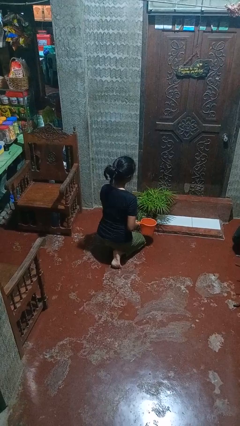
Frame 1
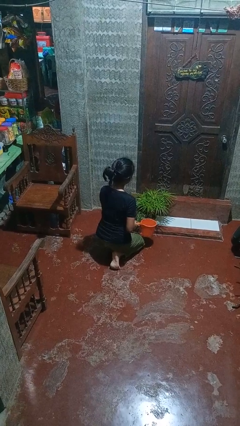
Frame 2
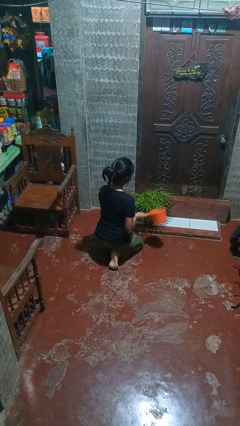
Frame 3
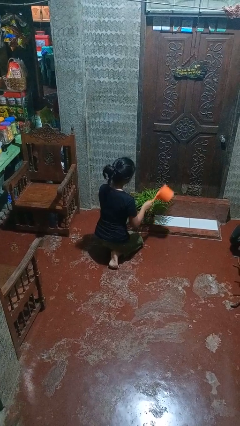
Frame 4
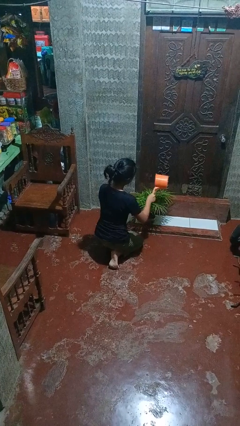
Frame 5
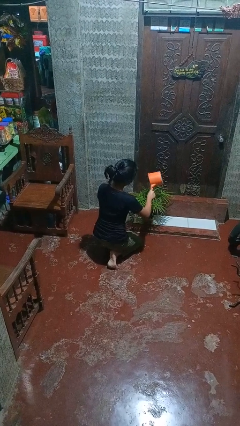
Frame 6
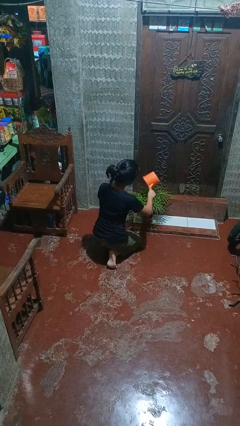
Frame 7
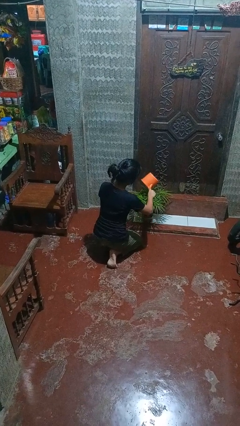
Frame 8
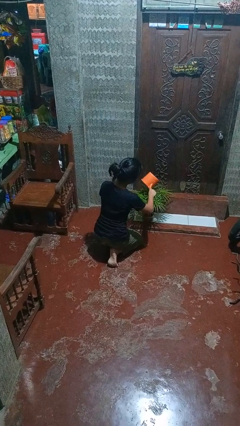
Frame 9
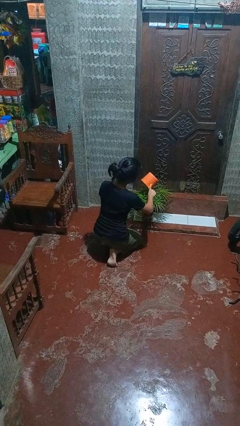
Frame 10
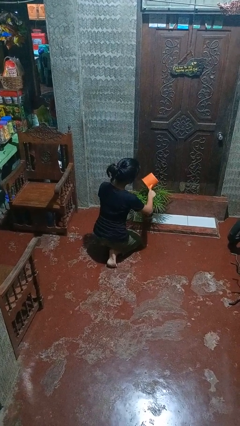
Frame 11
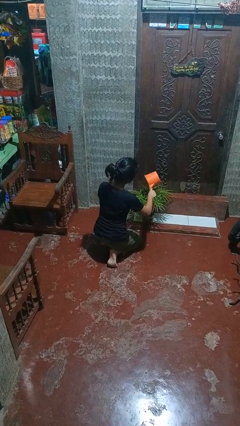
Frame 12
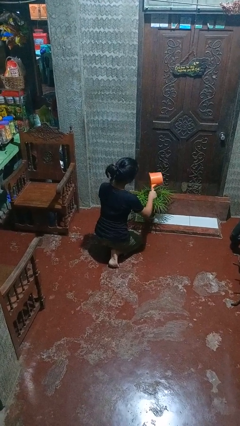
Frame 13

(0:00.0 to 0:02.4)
person waters houseplant

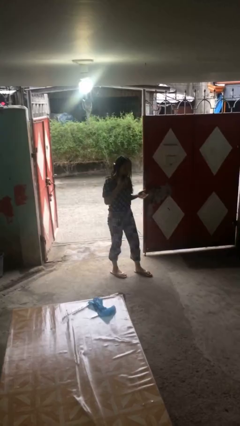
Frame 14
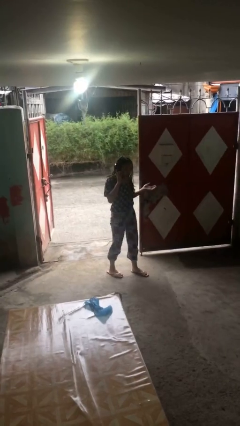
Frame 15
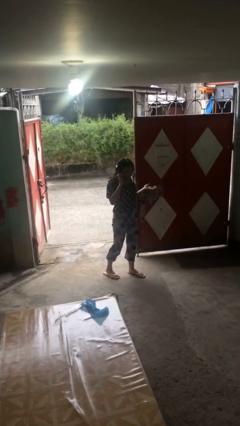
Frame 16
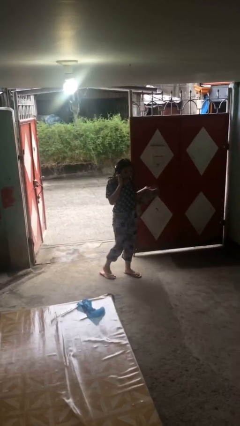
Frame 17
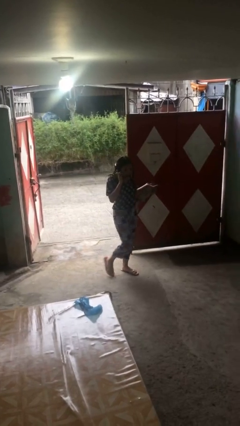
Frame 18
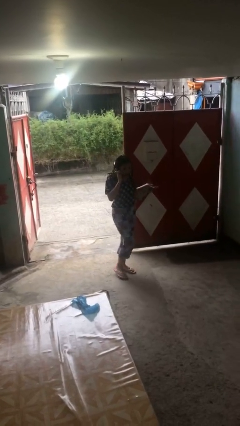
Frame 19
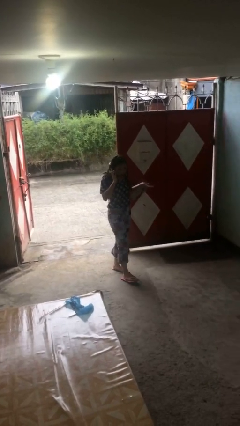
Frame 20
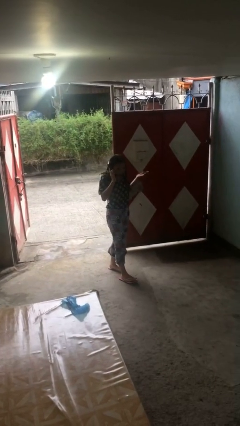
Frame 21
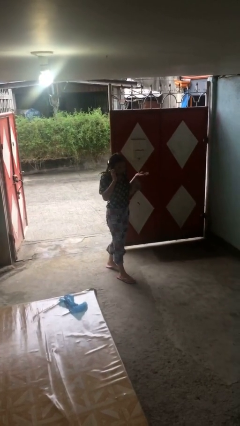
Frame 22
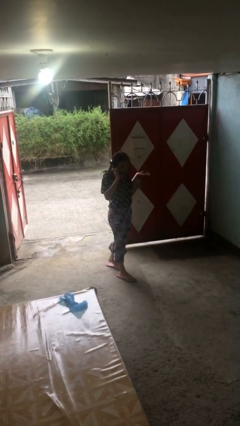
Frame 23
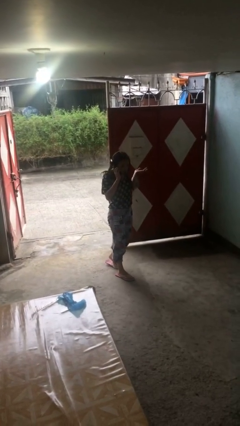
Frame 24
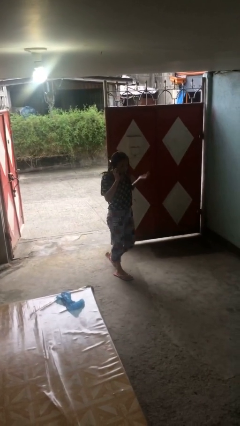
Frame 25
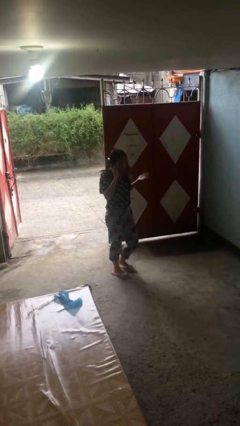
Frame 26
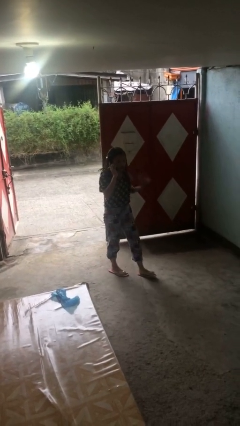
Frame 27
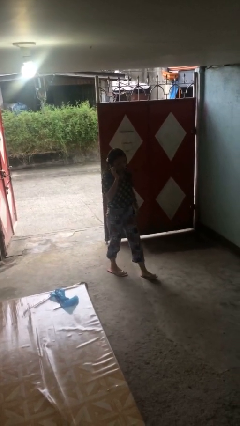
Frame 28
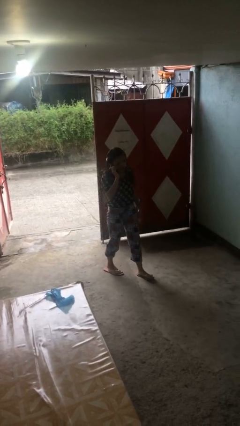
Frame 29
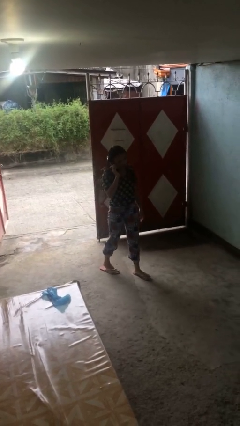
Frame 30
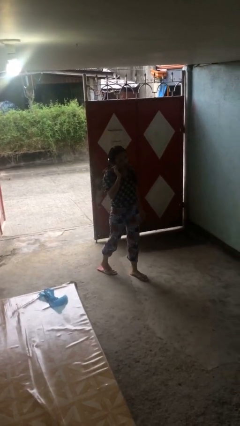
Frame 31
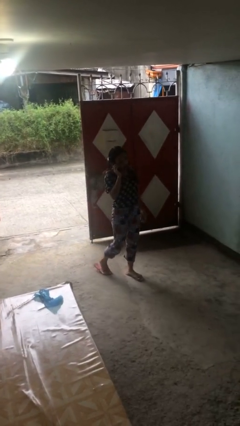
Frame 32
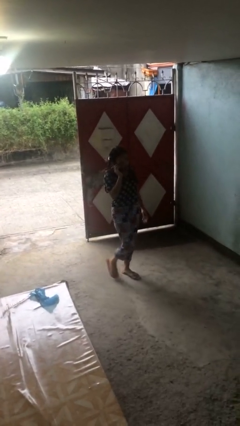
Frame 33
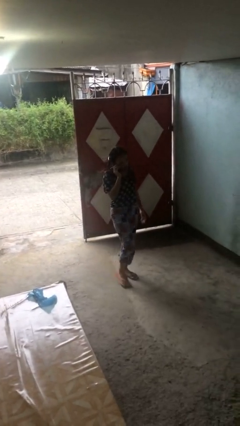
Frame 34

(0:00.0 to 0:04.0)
person talks on phone

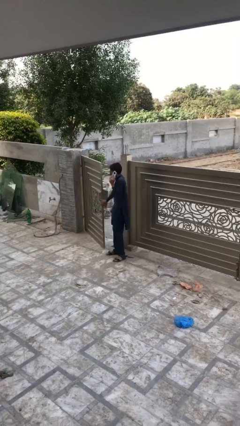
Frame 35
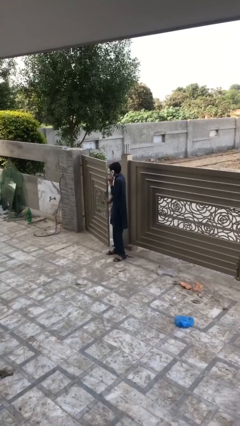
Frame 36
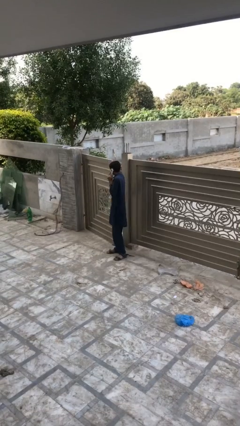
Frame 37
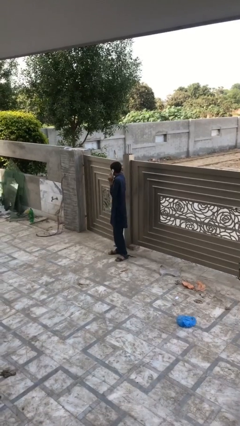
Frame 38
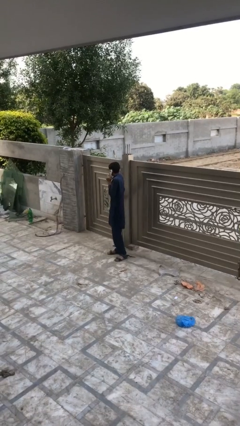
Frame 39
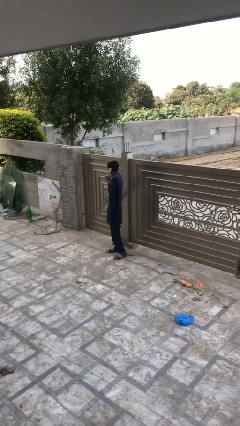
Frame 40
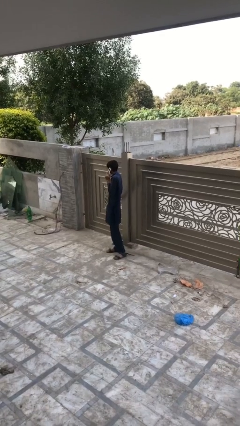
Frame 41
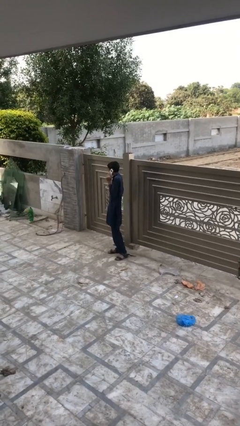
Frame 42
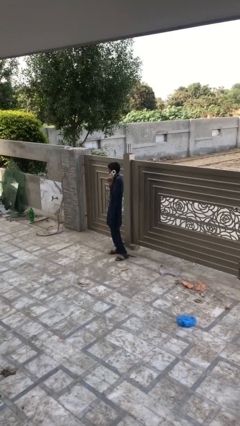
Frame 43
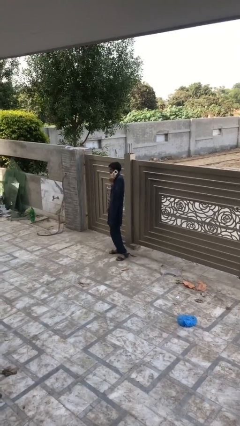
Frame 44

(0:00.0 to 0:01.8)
person closes facility door

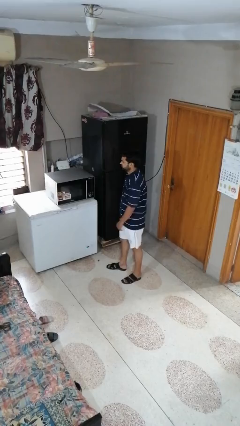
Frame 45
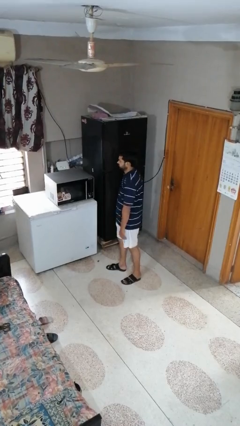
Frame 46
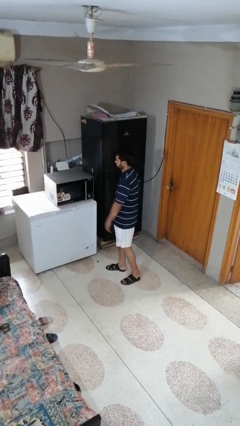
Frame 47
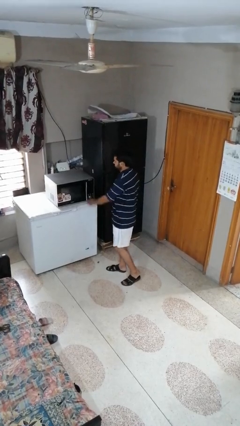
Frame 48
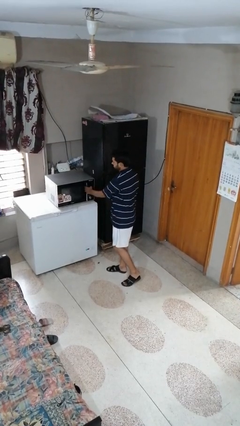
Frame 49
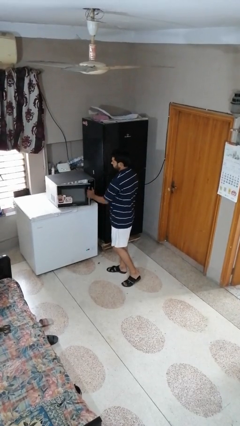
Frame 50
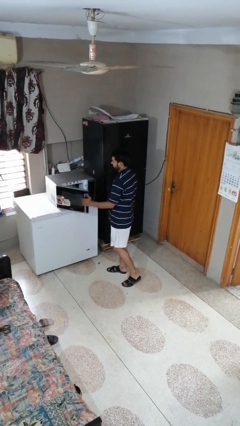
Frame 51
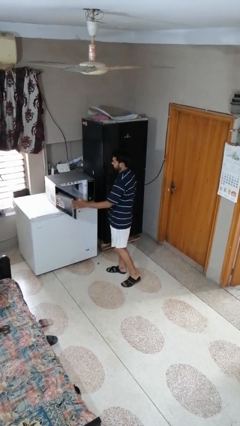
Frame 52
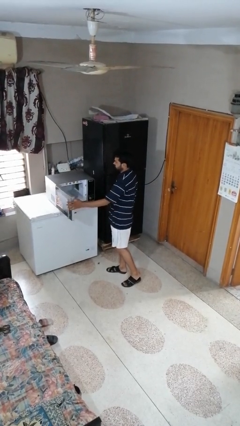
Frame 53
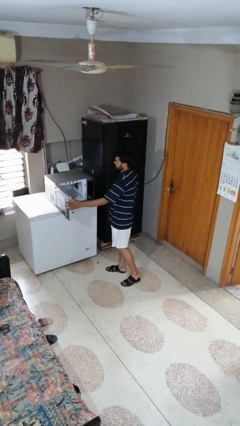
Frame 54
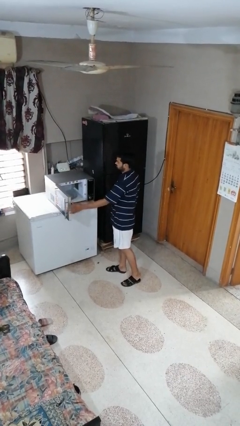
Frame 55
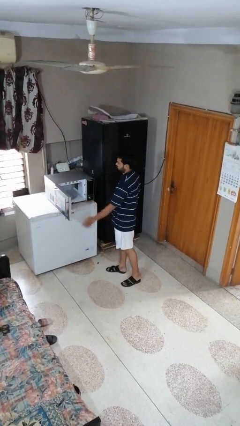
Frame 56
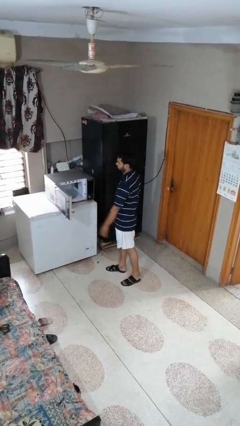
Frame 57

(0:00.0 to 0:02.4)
person opens microwave

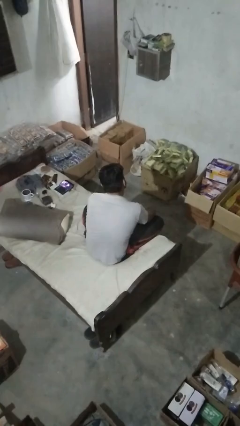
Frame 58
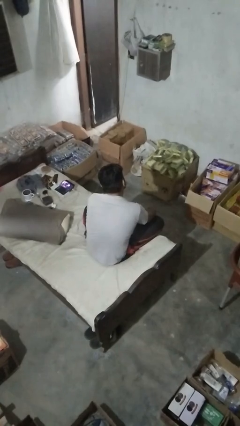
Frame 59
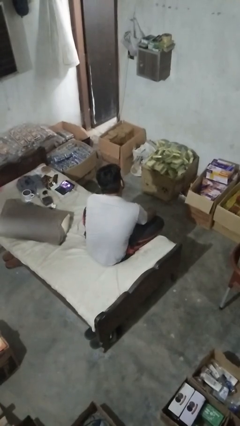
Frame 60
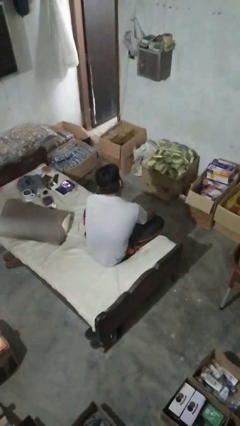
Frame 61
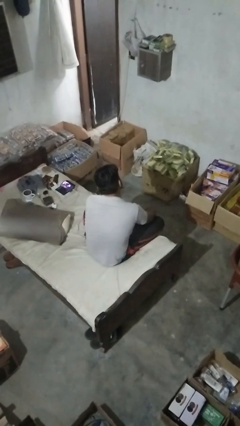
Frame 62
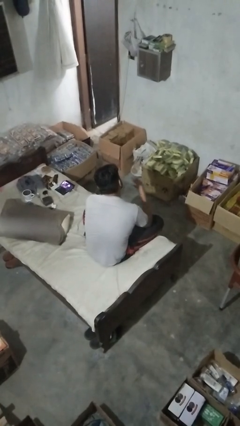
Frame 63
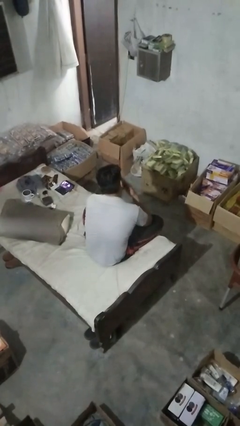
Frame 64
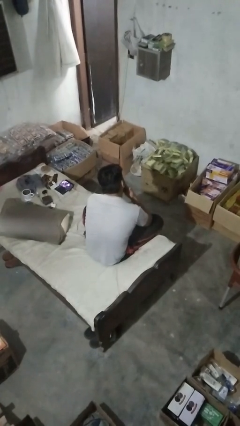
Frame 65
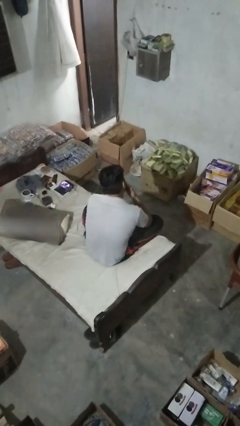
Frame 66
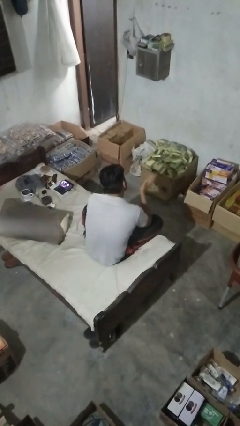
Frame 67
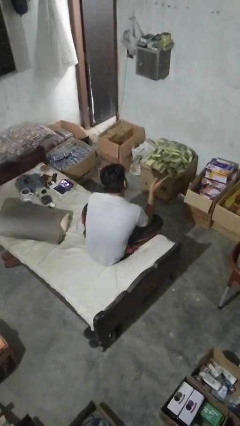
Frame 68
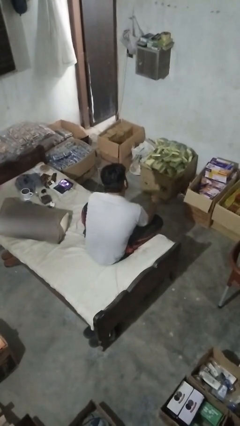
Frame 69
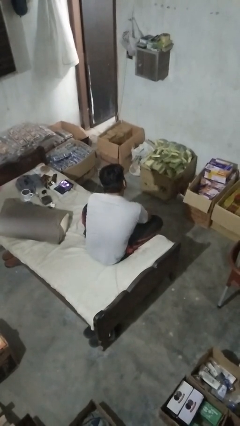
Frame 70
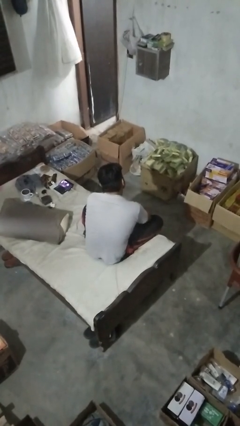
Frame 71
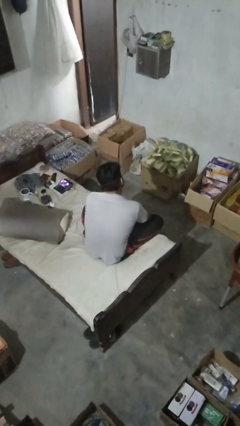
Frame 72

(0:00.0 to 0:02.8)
person gestures blow kiss

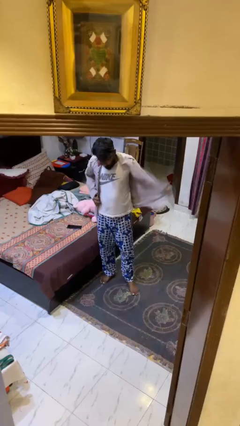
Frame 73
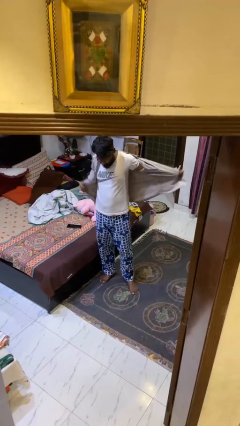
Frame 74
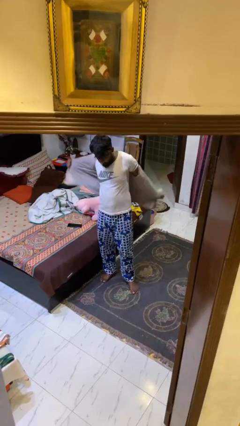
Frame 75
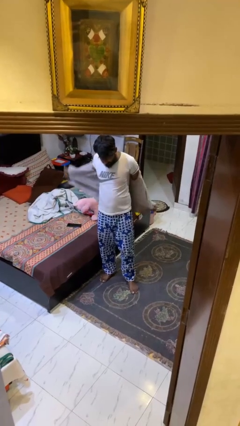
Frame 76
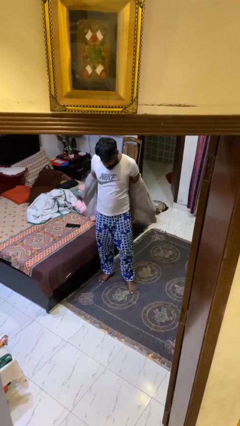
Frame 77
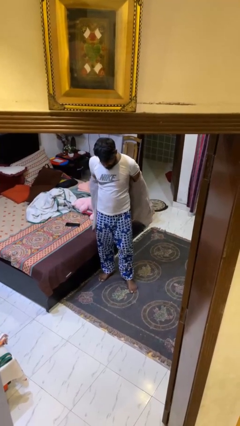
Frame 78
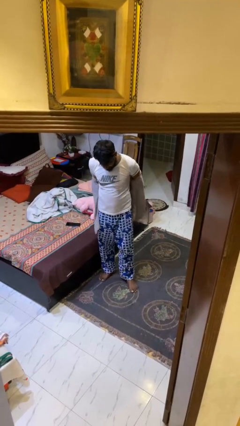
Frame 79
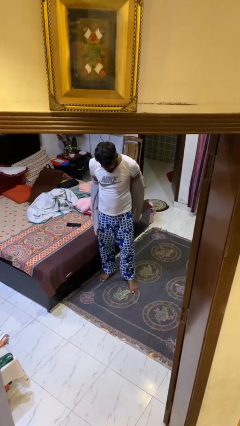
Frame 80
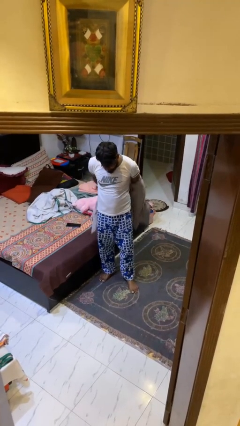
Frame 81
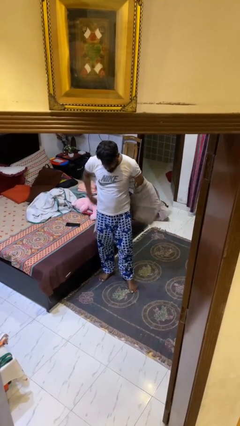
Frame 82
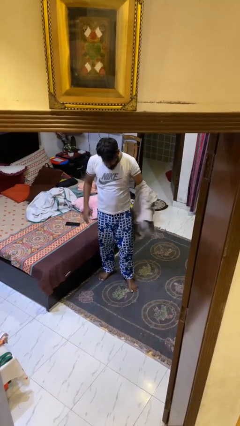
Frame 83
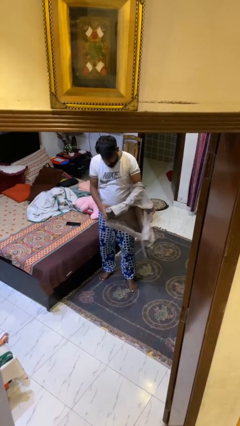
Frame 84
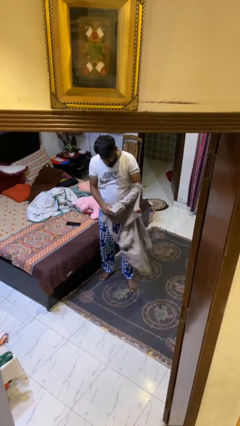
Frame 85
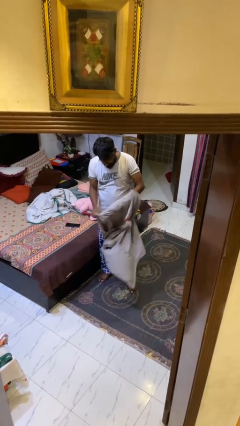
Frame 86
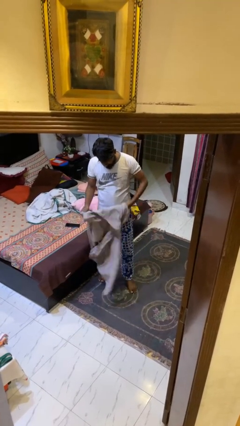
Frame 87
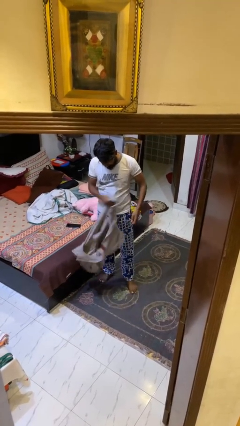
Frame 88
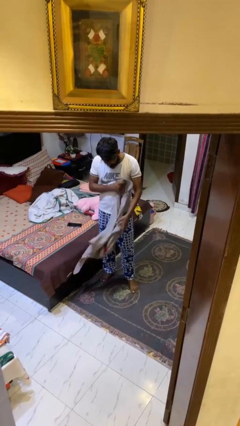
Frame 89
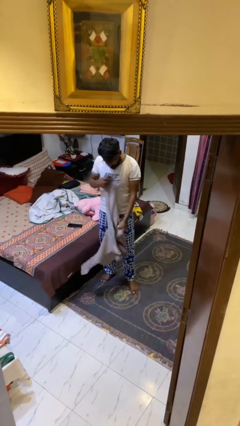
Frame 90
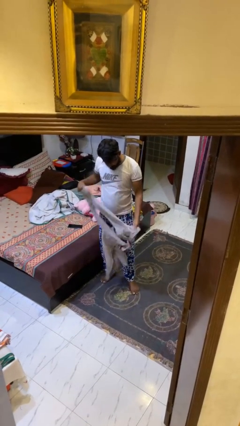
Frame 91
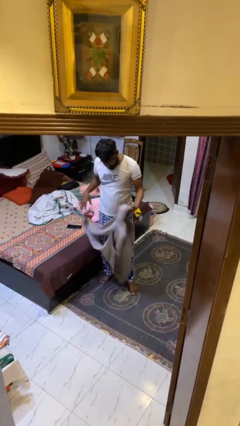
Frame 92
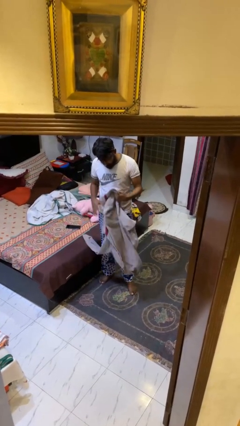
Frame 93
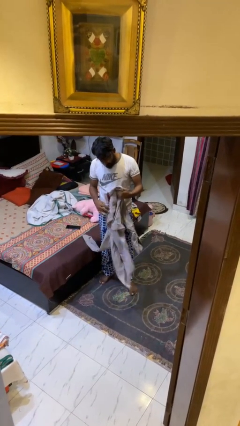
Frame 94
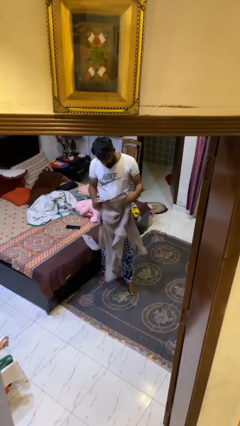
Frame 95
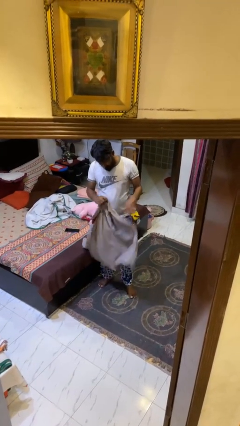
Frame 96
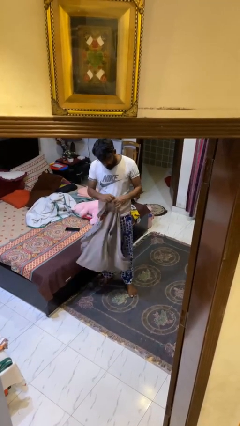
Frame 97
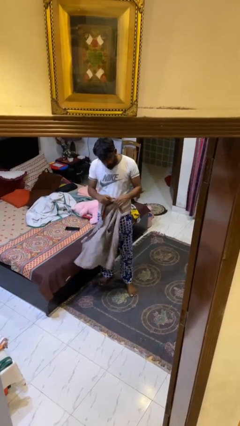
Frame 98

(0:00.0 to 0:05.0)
person takes off shirt
